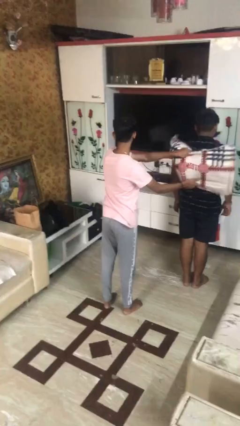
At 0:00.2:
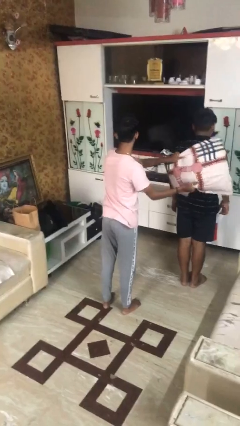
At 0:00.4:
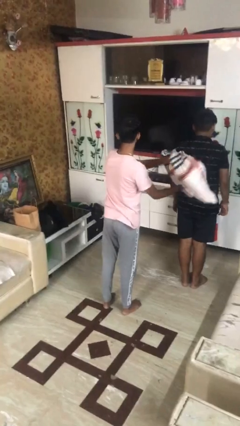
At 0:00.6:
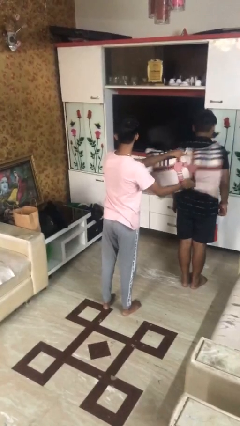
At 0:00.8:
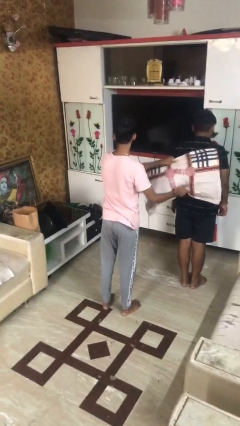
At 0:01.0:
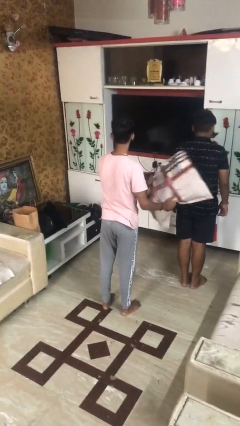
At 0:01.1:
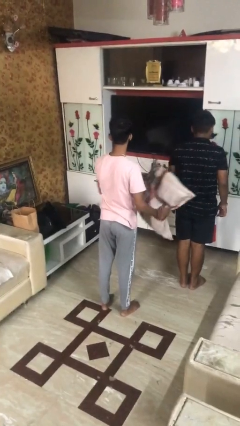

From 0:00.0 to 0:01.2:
person hits person with pillow

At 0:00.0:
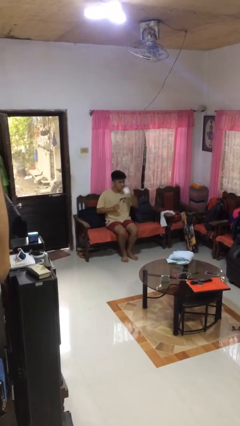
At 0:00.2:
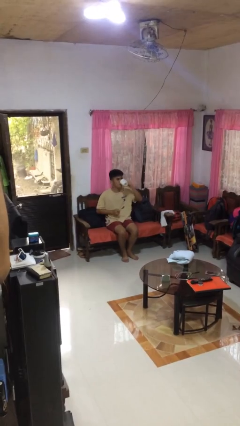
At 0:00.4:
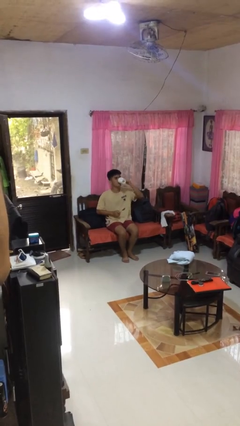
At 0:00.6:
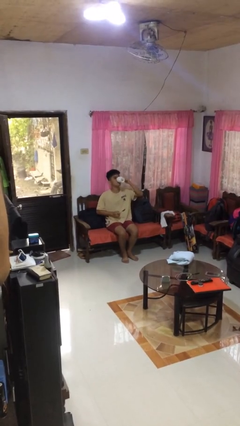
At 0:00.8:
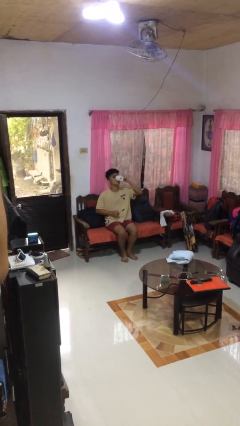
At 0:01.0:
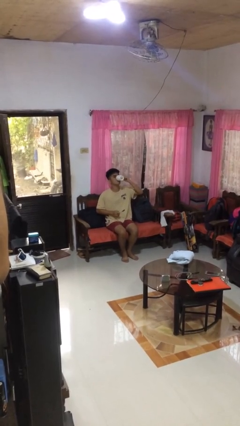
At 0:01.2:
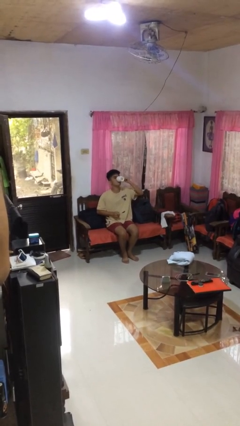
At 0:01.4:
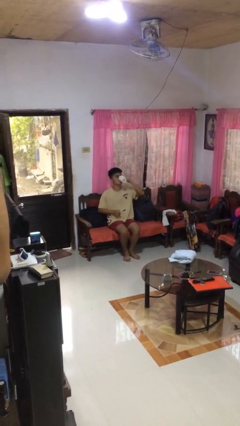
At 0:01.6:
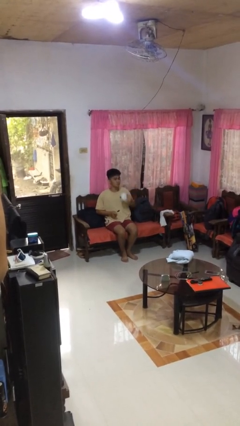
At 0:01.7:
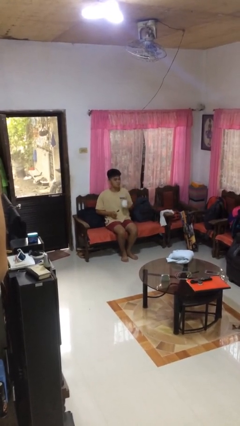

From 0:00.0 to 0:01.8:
person drinks from mug

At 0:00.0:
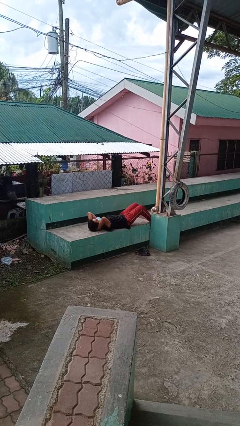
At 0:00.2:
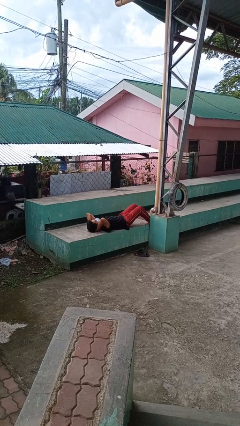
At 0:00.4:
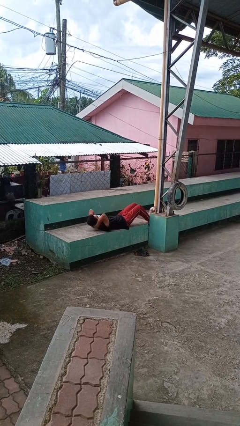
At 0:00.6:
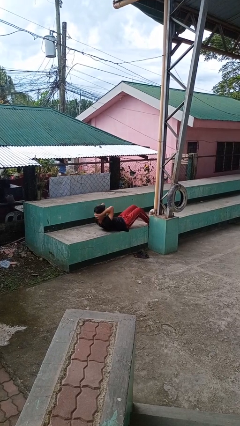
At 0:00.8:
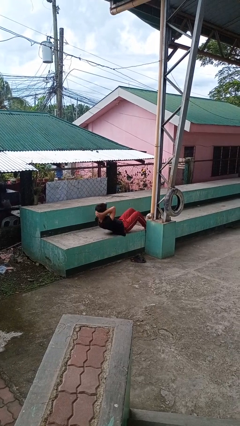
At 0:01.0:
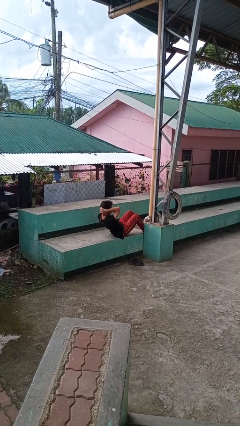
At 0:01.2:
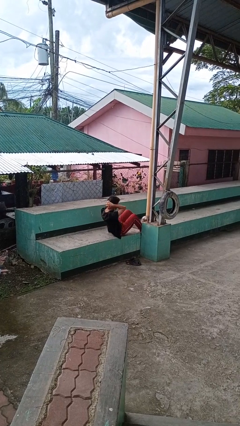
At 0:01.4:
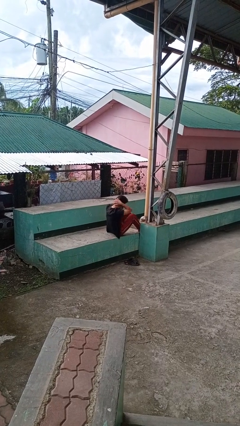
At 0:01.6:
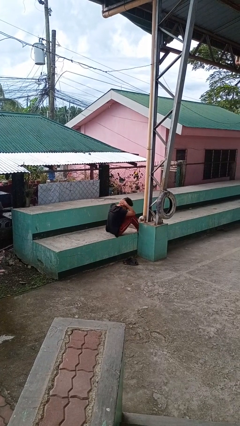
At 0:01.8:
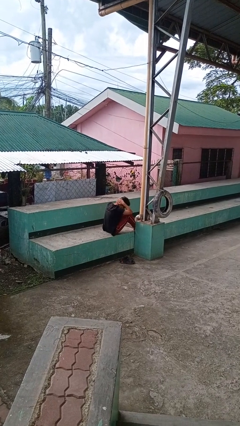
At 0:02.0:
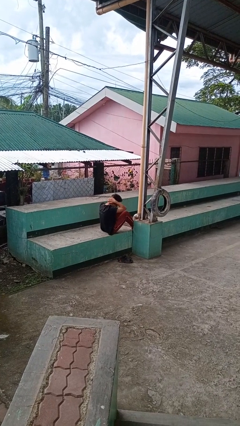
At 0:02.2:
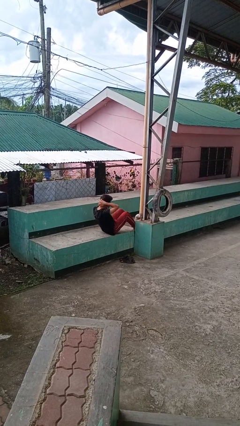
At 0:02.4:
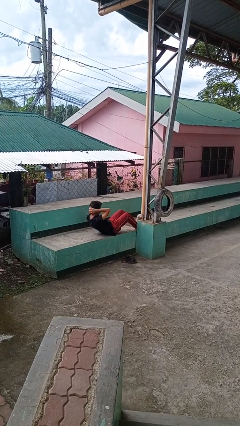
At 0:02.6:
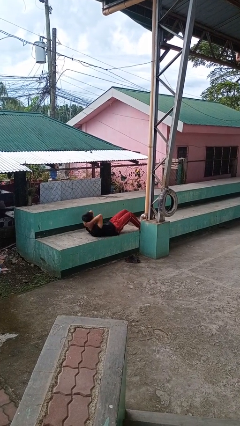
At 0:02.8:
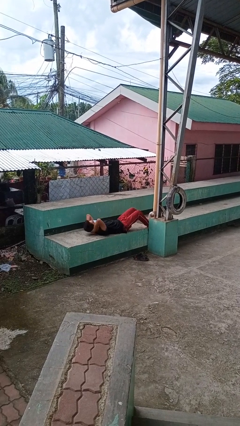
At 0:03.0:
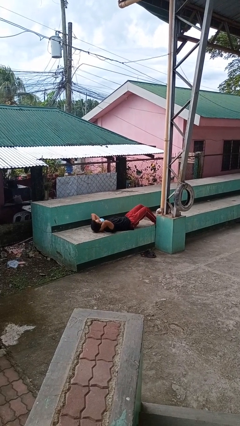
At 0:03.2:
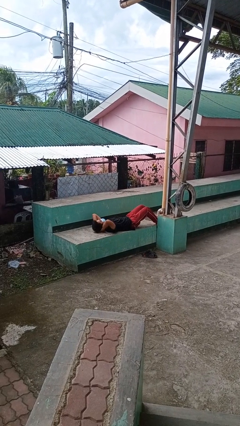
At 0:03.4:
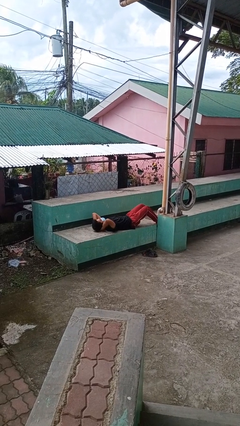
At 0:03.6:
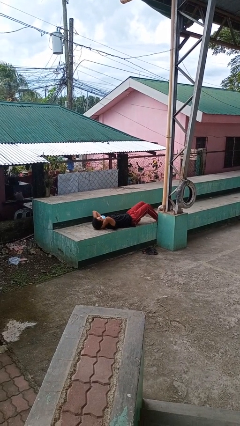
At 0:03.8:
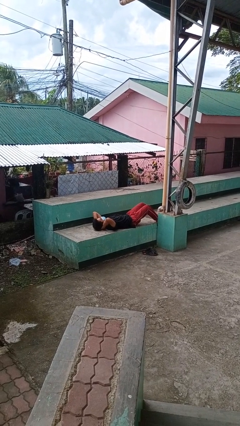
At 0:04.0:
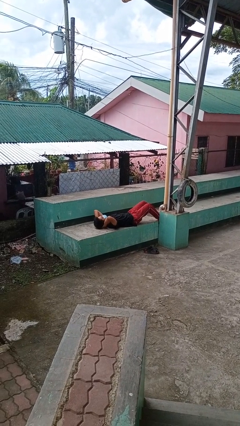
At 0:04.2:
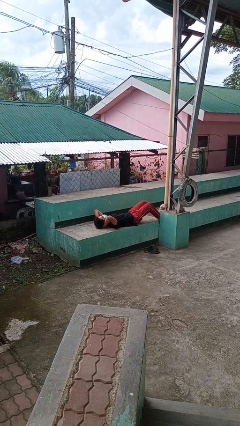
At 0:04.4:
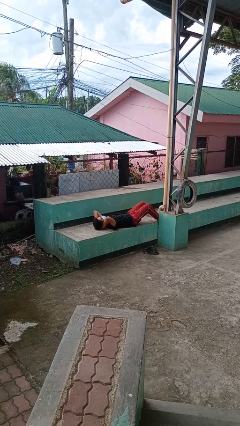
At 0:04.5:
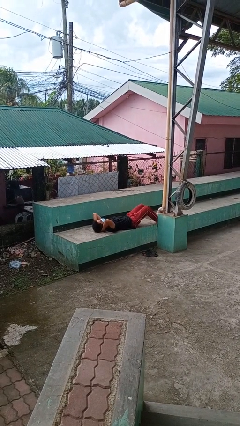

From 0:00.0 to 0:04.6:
person exercises with situp

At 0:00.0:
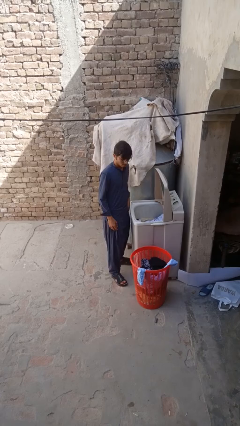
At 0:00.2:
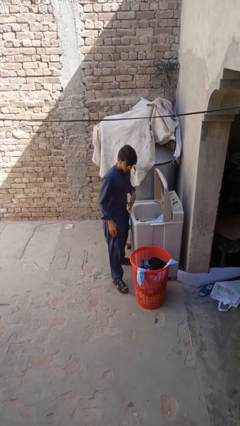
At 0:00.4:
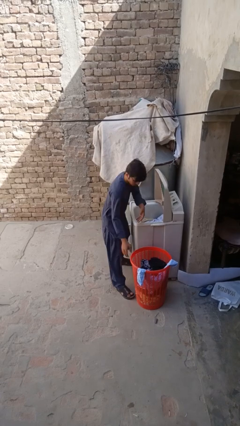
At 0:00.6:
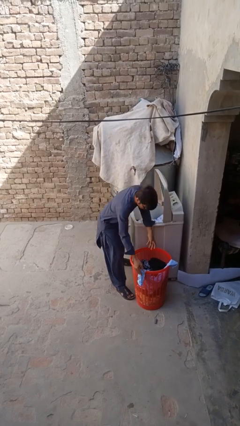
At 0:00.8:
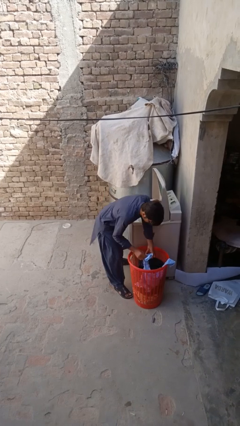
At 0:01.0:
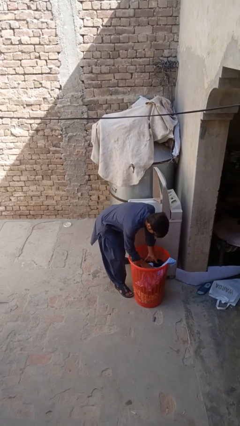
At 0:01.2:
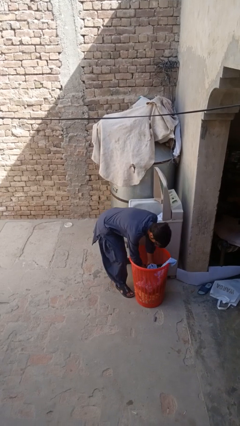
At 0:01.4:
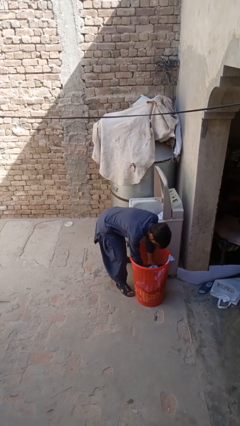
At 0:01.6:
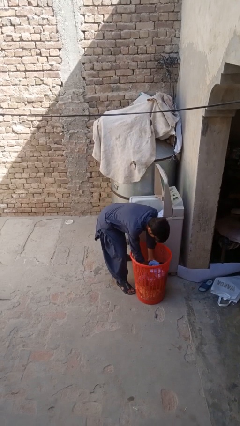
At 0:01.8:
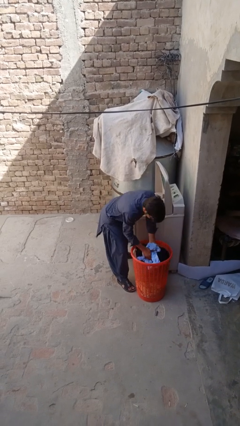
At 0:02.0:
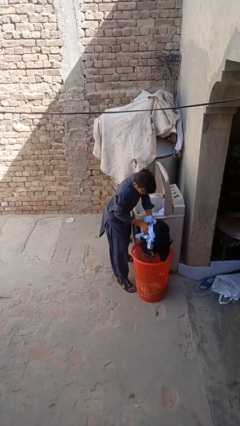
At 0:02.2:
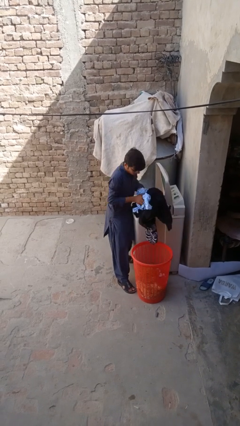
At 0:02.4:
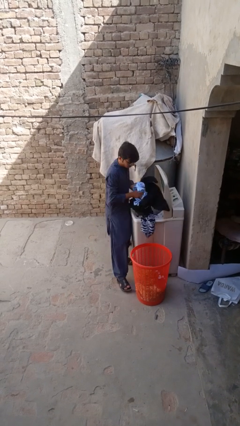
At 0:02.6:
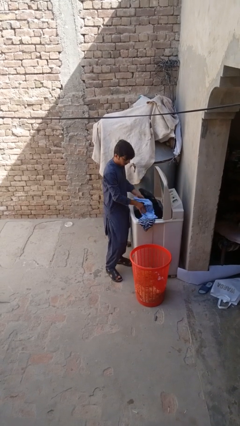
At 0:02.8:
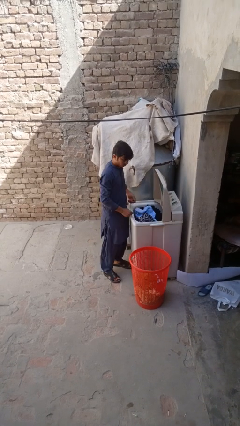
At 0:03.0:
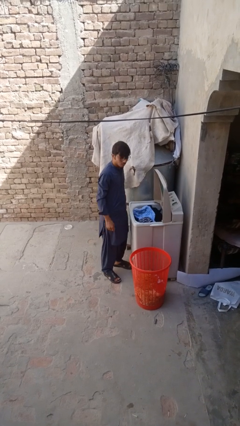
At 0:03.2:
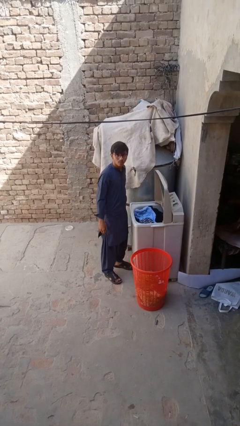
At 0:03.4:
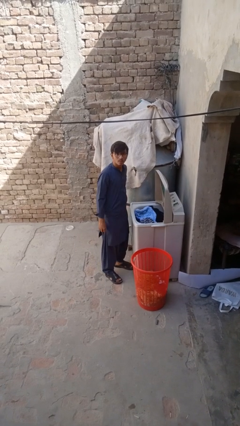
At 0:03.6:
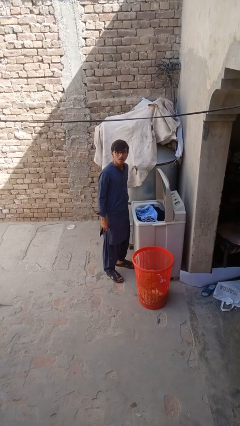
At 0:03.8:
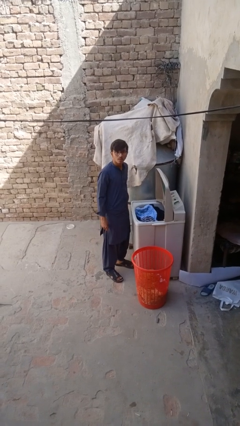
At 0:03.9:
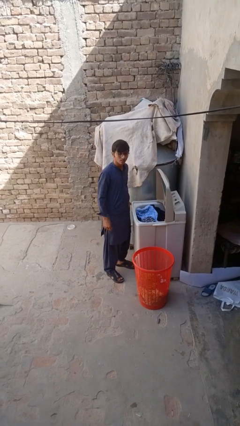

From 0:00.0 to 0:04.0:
person loads clotheswasher

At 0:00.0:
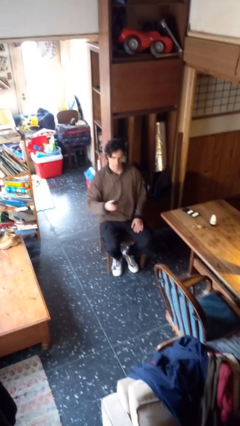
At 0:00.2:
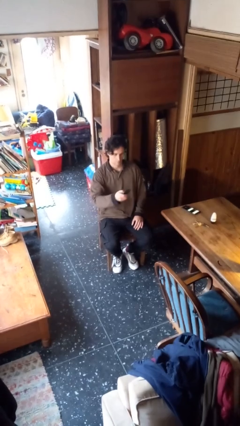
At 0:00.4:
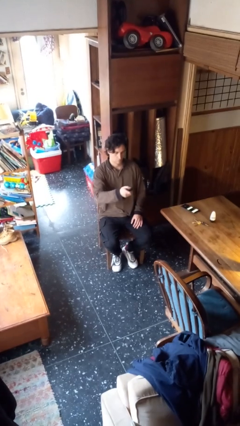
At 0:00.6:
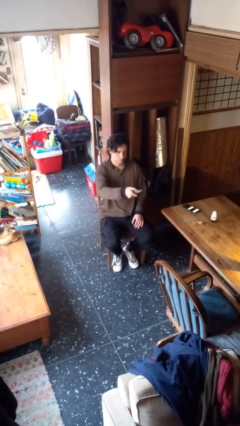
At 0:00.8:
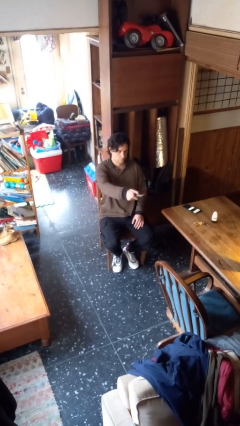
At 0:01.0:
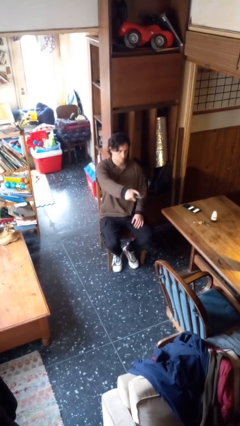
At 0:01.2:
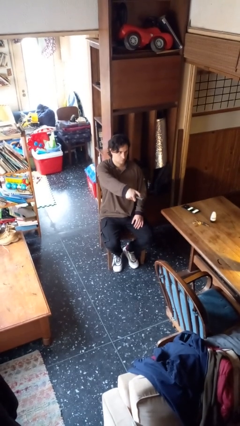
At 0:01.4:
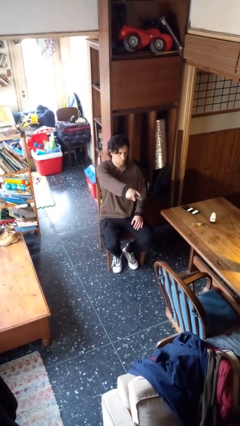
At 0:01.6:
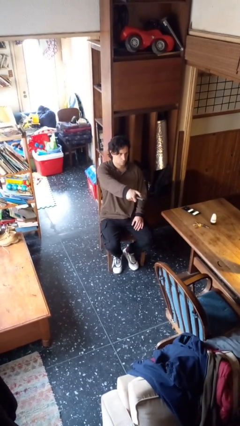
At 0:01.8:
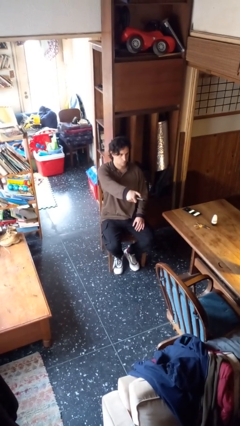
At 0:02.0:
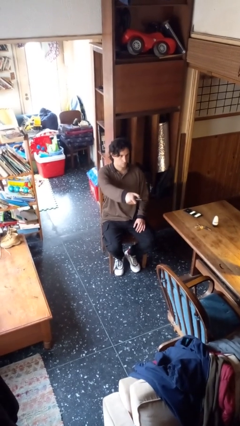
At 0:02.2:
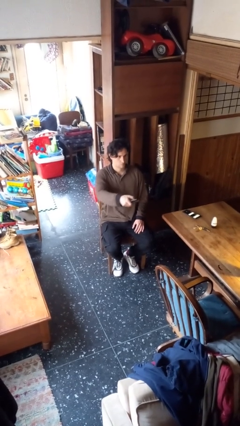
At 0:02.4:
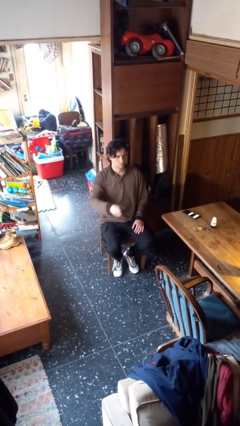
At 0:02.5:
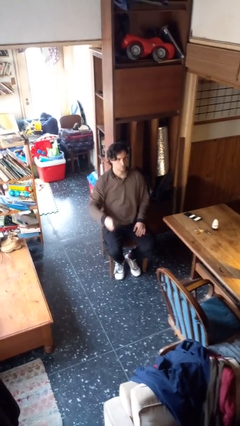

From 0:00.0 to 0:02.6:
person uses television remote

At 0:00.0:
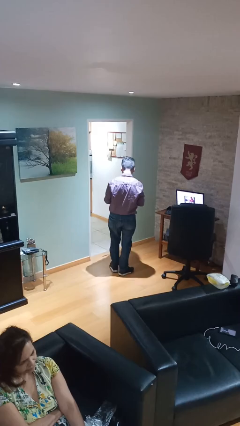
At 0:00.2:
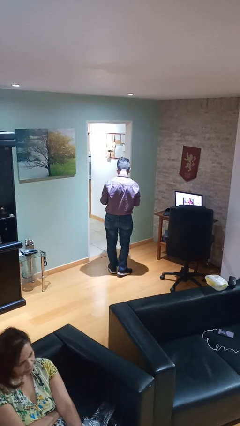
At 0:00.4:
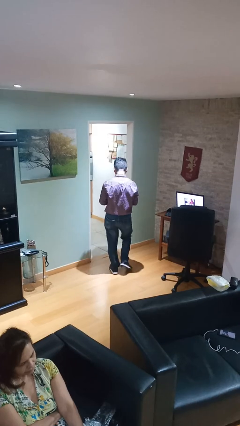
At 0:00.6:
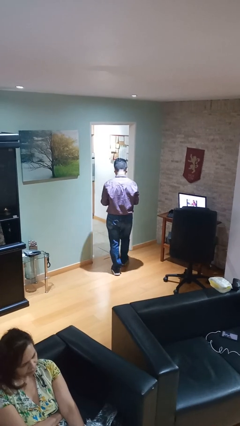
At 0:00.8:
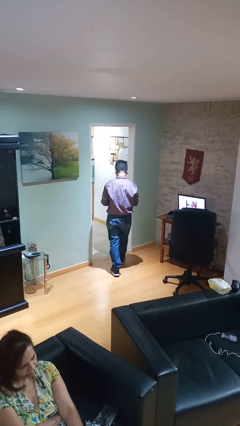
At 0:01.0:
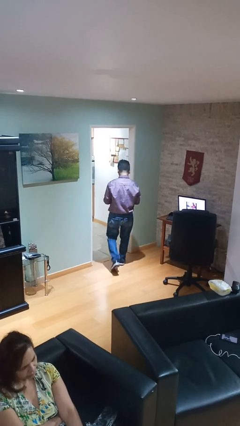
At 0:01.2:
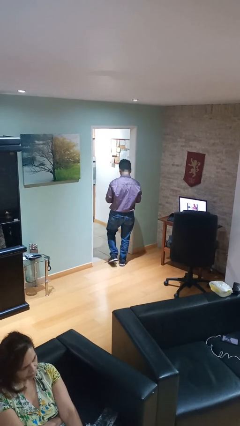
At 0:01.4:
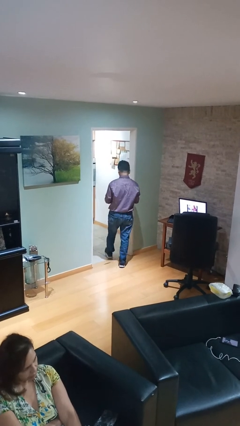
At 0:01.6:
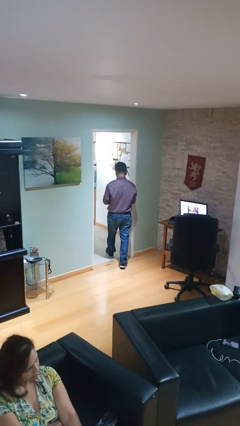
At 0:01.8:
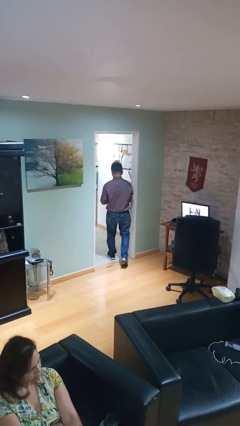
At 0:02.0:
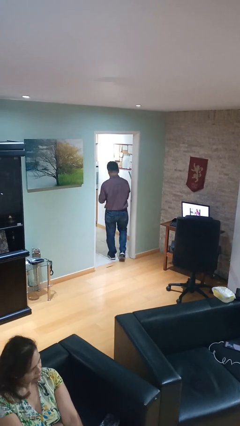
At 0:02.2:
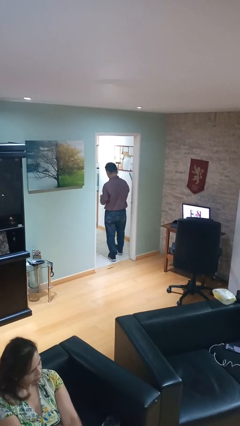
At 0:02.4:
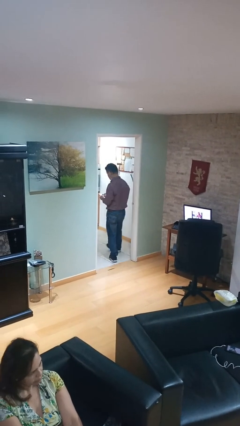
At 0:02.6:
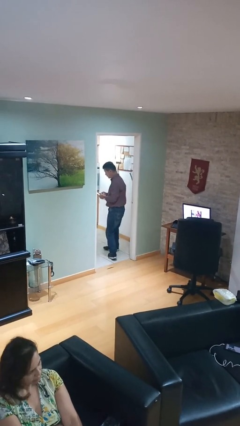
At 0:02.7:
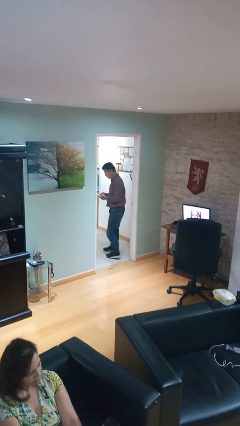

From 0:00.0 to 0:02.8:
person exits scene through structure
